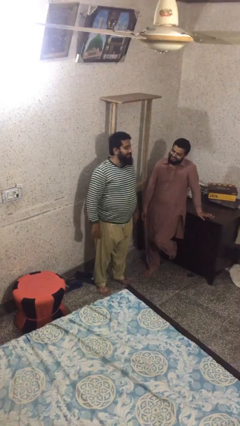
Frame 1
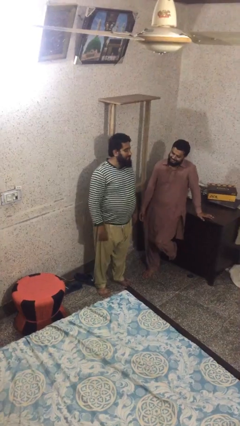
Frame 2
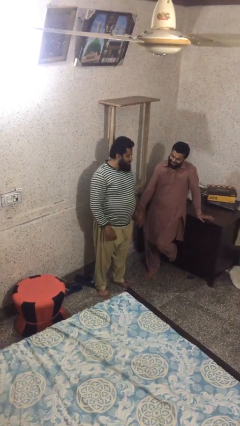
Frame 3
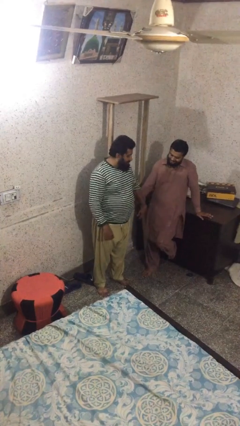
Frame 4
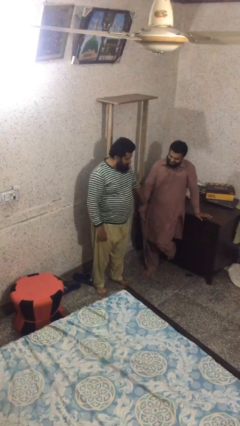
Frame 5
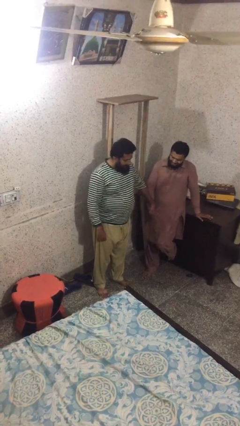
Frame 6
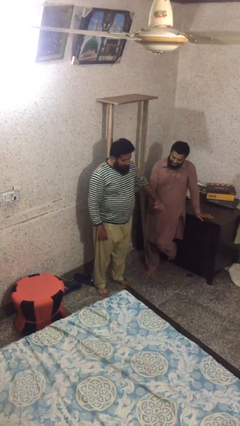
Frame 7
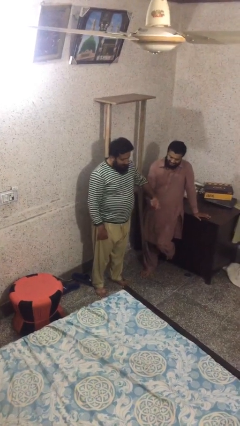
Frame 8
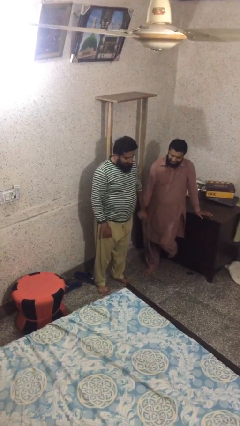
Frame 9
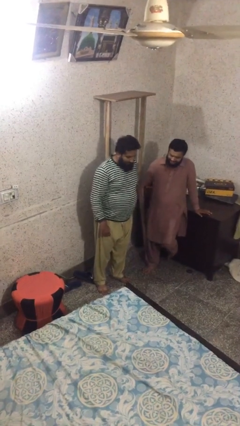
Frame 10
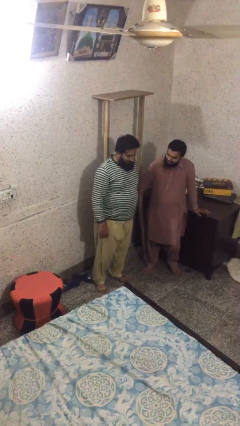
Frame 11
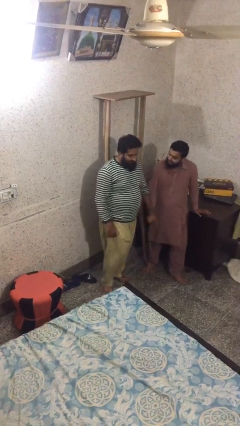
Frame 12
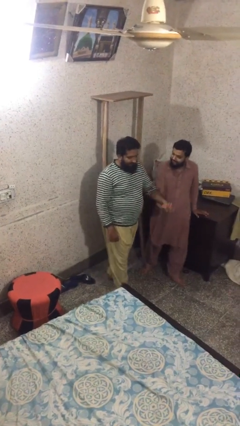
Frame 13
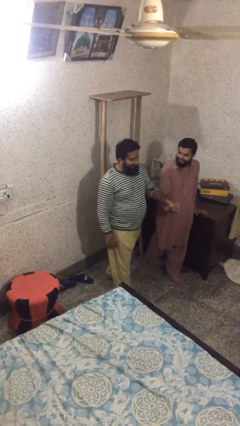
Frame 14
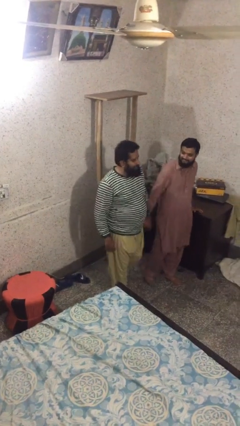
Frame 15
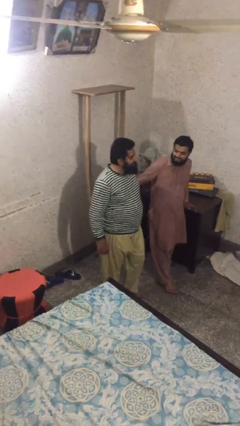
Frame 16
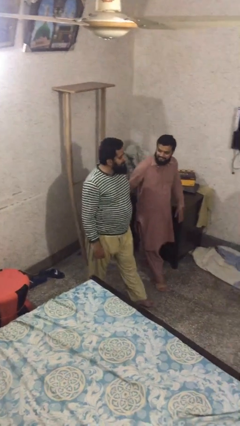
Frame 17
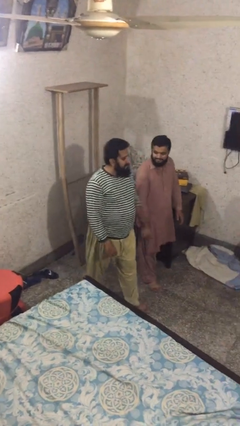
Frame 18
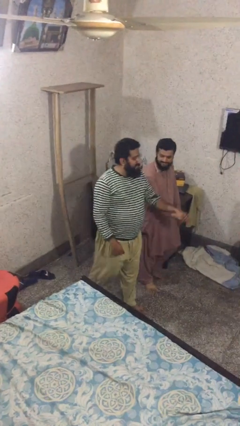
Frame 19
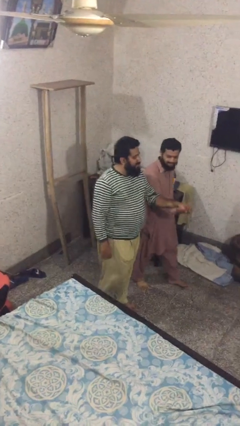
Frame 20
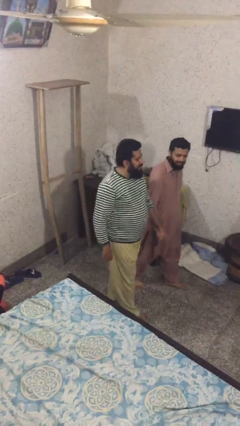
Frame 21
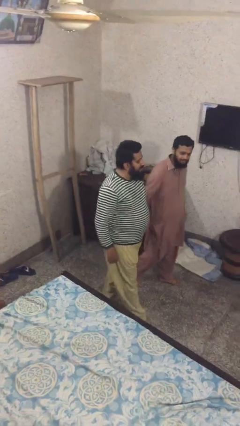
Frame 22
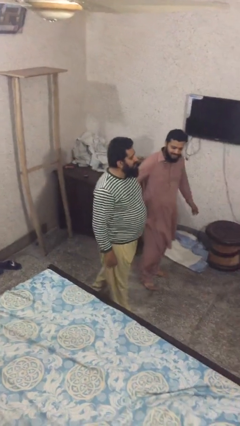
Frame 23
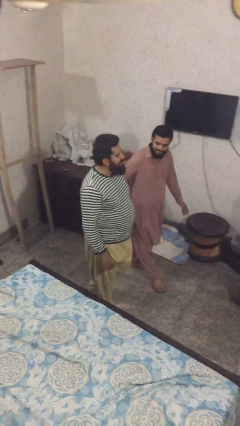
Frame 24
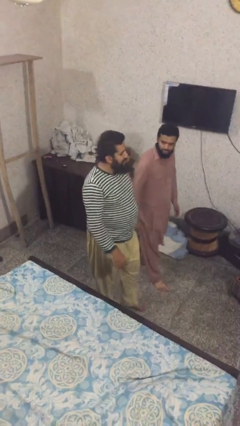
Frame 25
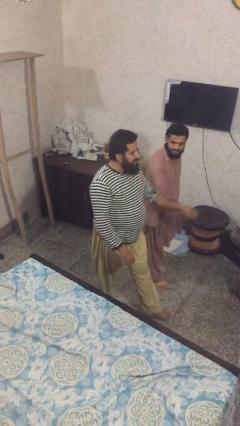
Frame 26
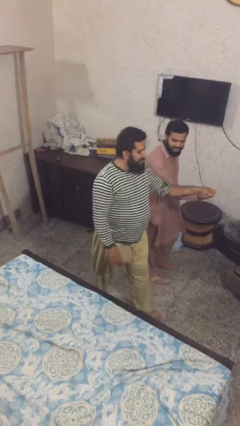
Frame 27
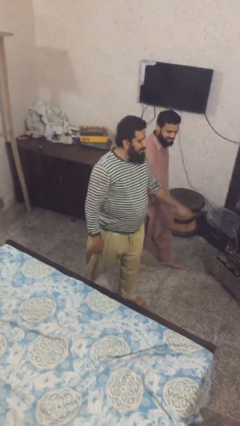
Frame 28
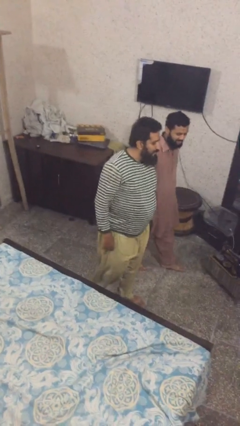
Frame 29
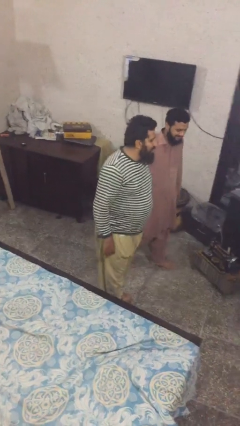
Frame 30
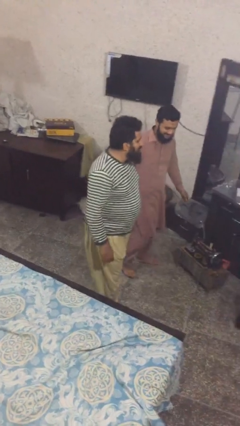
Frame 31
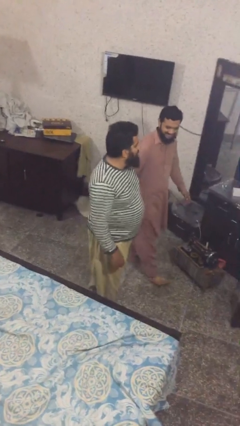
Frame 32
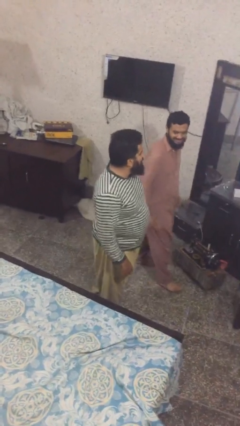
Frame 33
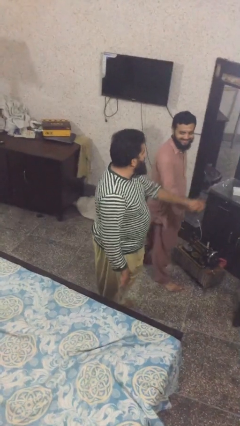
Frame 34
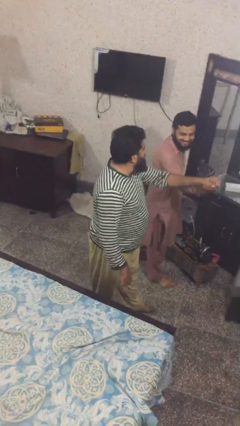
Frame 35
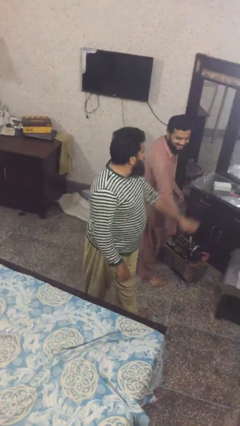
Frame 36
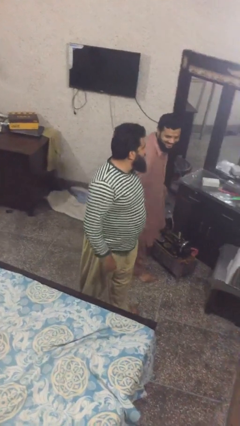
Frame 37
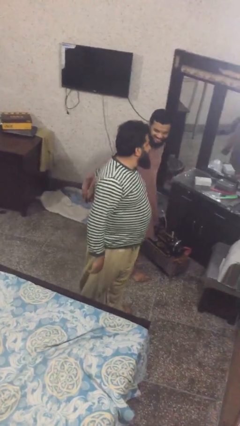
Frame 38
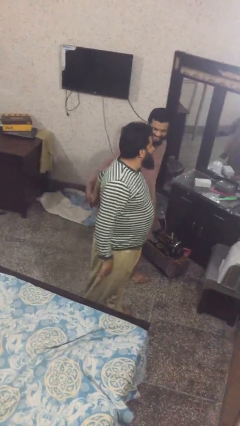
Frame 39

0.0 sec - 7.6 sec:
person holds hand

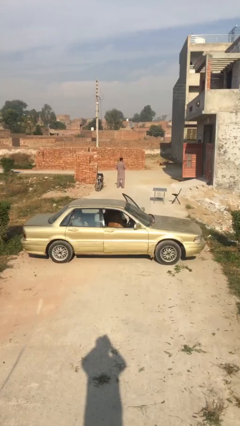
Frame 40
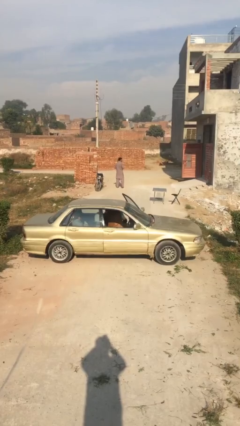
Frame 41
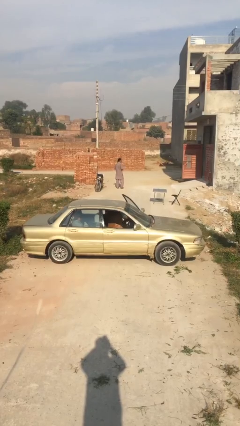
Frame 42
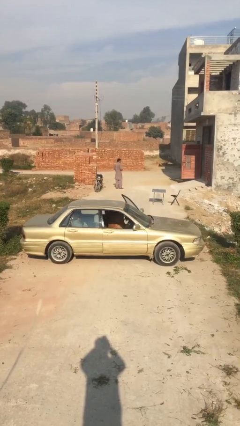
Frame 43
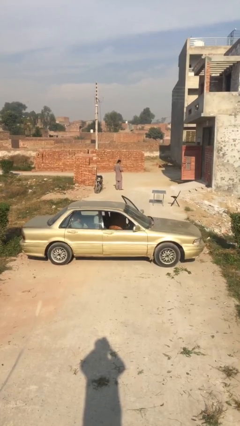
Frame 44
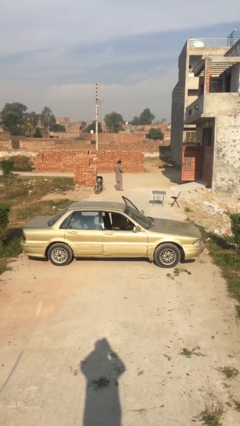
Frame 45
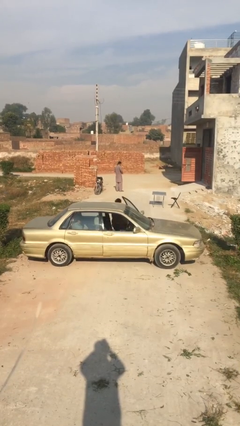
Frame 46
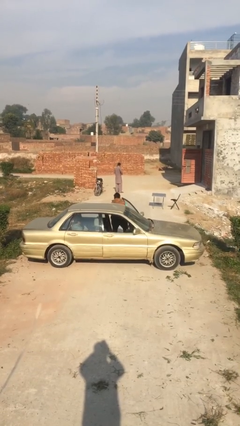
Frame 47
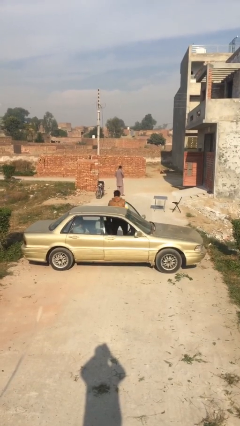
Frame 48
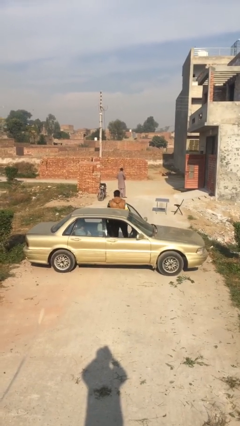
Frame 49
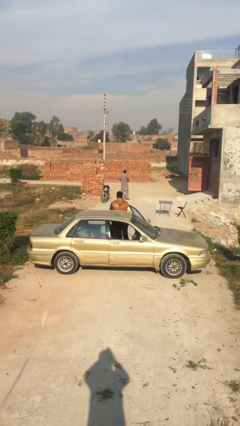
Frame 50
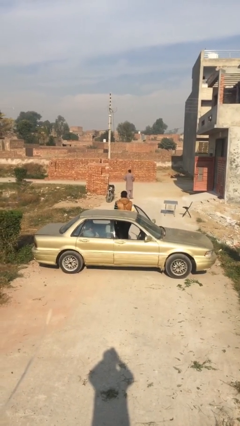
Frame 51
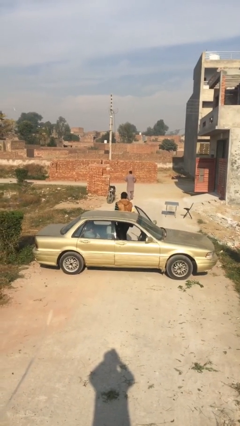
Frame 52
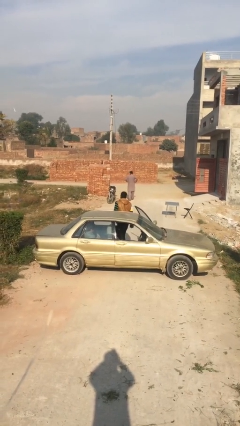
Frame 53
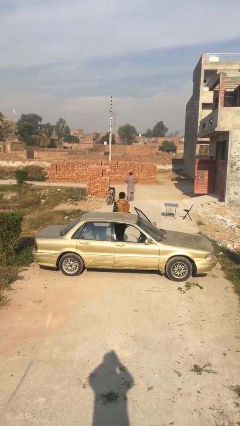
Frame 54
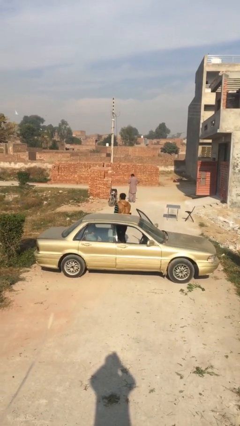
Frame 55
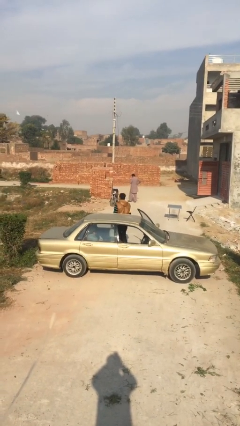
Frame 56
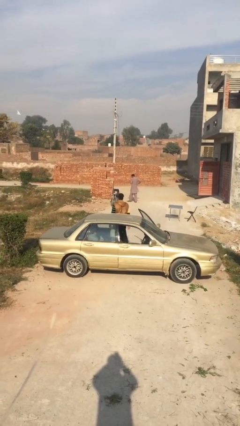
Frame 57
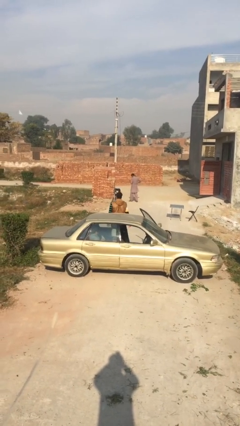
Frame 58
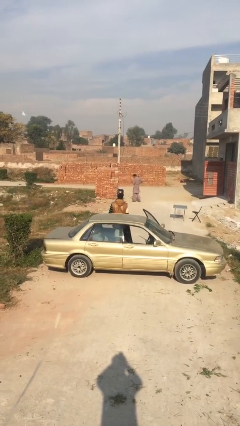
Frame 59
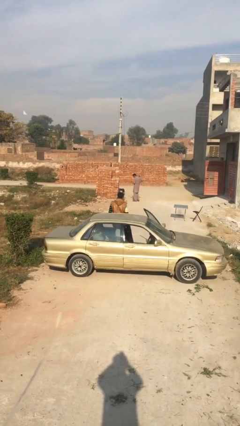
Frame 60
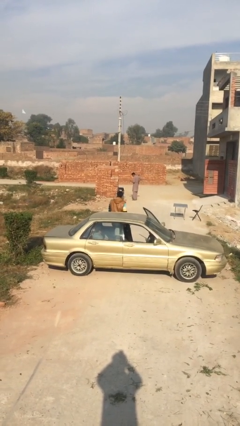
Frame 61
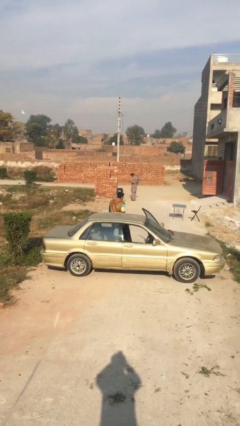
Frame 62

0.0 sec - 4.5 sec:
person exits car

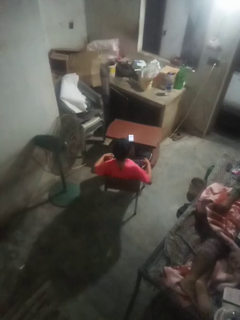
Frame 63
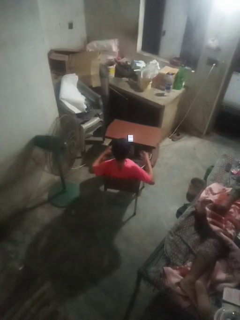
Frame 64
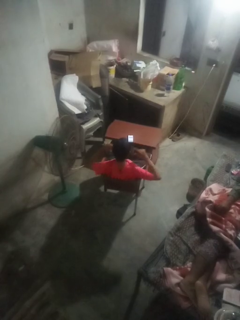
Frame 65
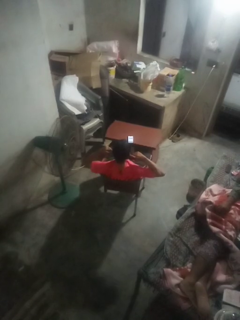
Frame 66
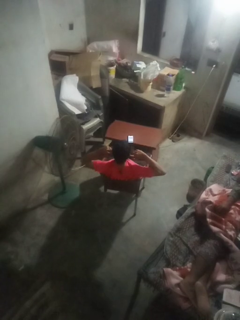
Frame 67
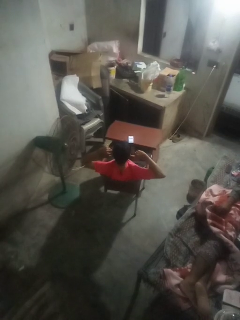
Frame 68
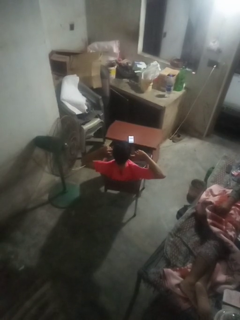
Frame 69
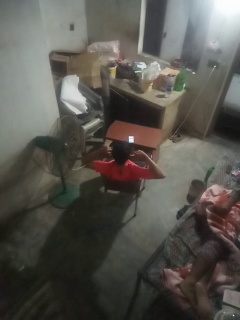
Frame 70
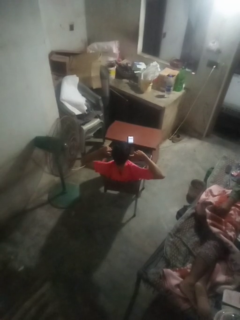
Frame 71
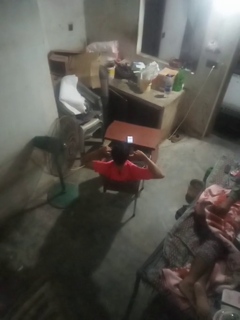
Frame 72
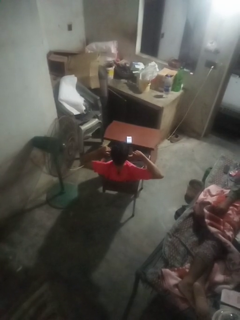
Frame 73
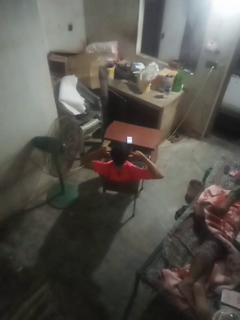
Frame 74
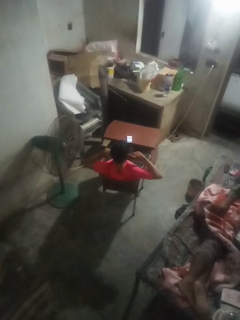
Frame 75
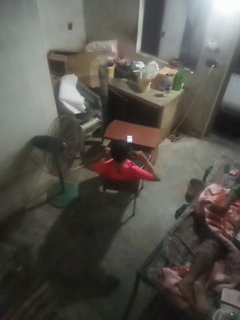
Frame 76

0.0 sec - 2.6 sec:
person puts fingers in ear

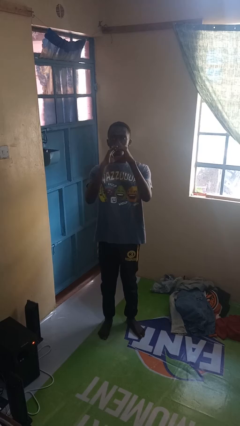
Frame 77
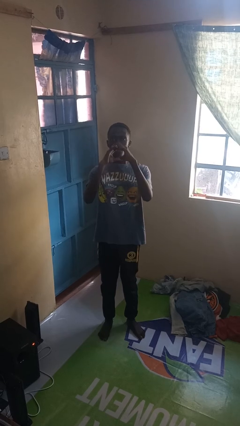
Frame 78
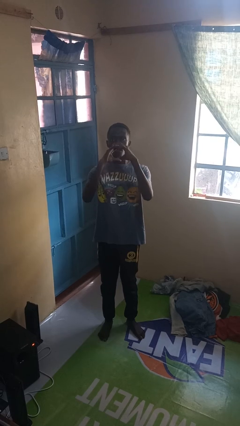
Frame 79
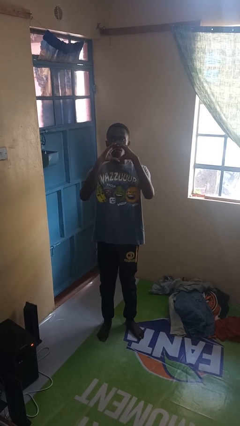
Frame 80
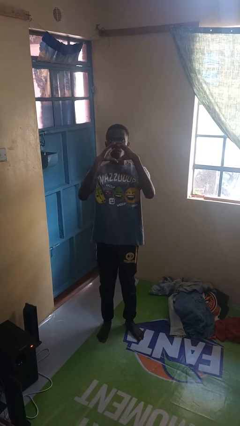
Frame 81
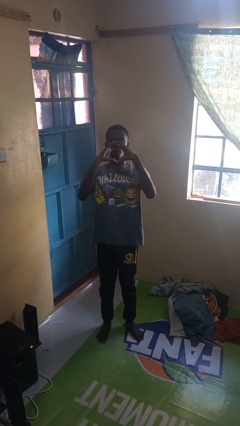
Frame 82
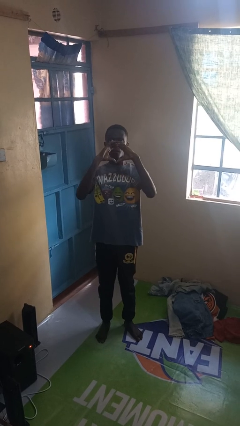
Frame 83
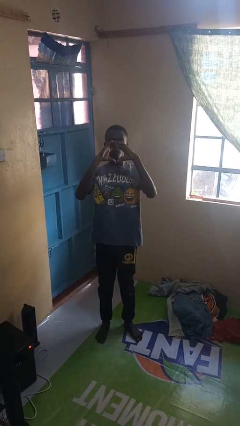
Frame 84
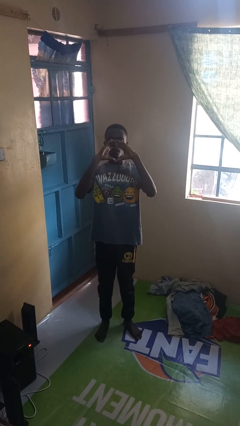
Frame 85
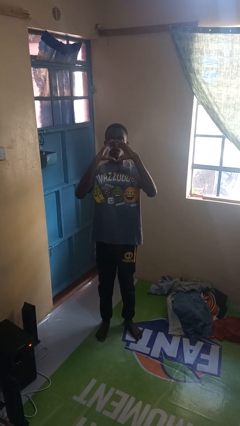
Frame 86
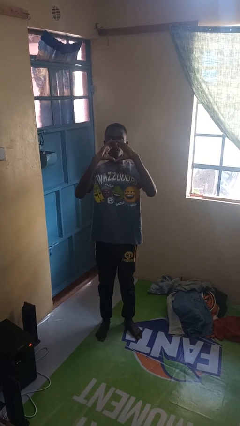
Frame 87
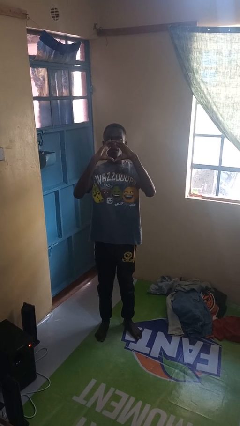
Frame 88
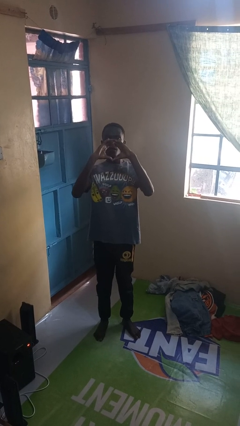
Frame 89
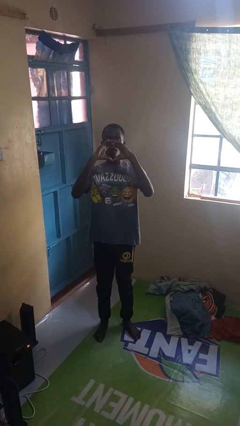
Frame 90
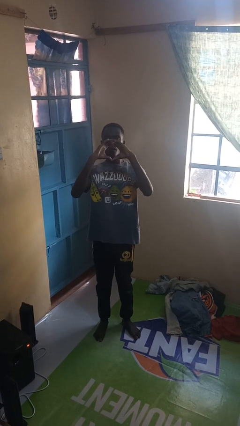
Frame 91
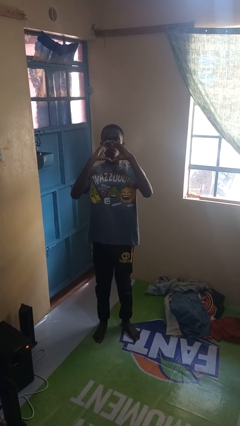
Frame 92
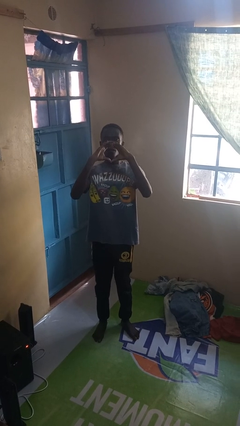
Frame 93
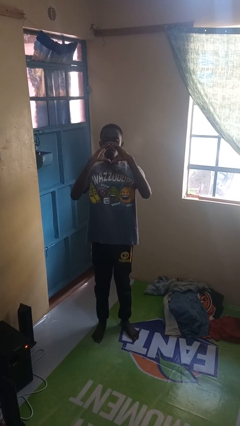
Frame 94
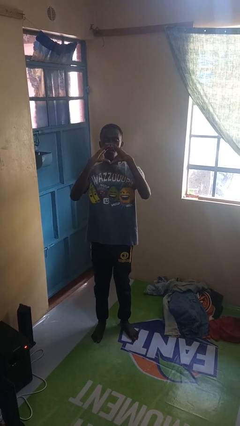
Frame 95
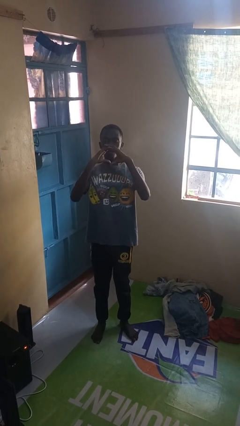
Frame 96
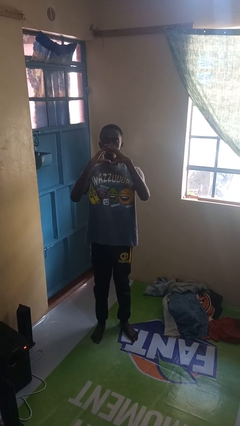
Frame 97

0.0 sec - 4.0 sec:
person gestures zoom in
